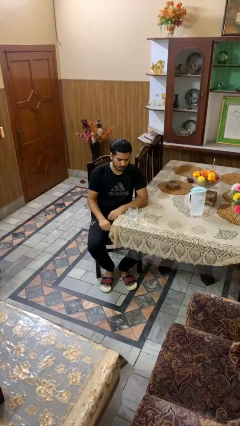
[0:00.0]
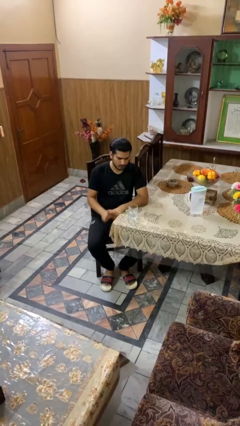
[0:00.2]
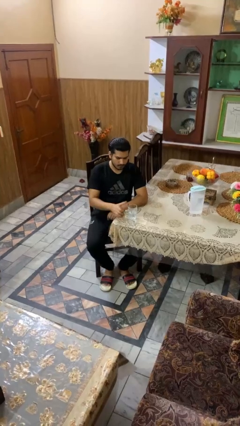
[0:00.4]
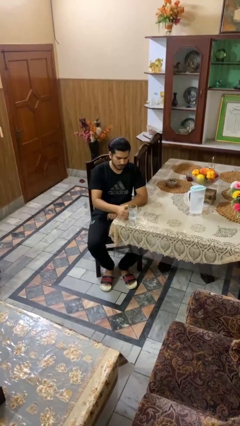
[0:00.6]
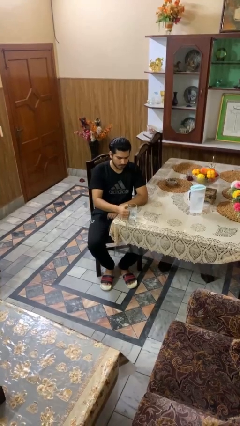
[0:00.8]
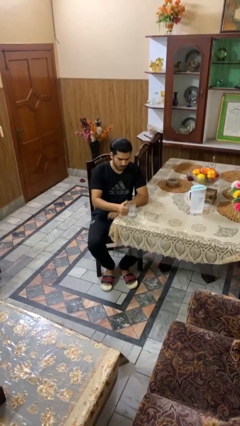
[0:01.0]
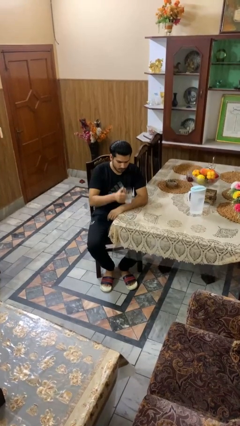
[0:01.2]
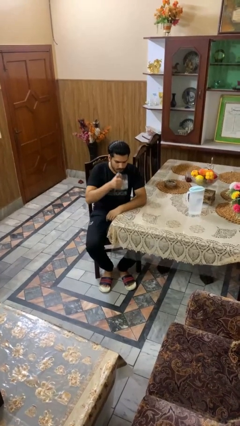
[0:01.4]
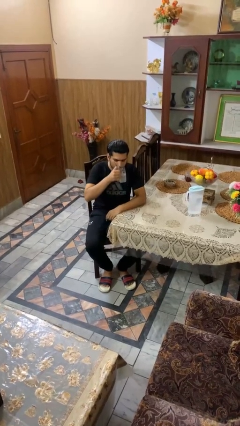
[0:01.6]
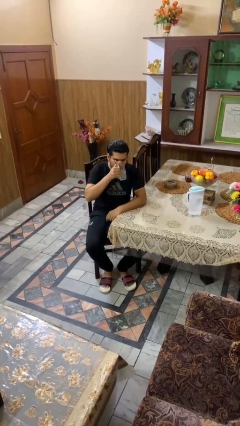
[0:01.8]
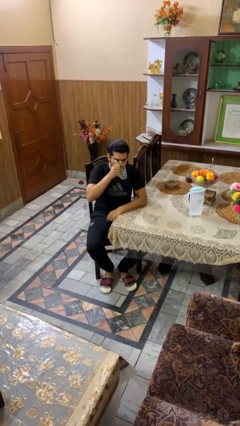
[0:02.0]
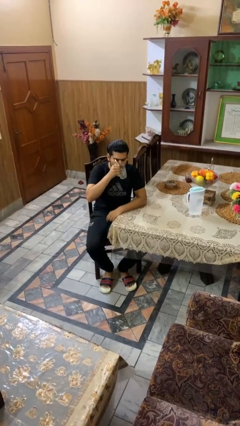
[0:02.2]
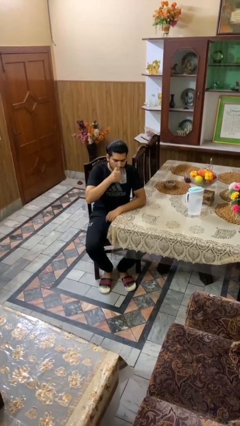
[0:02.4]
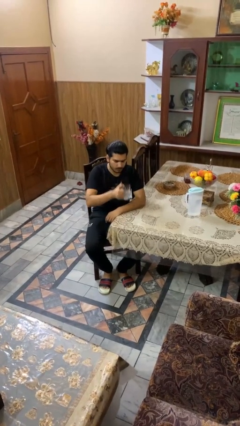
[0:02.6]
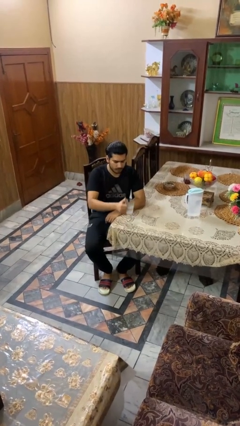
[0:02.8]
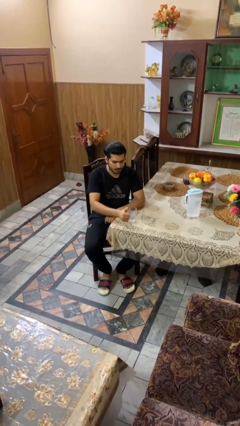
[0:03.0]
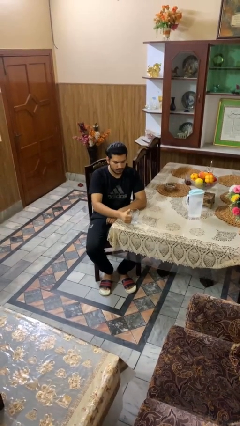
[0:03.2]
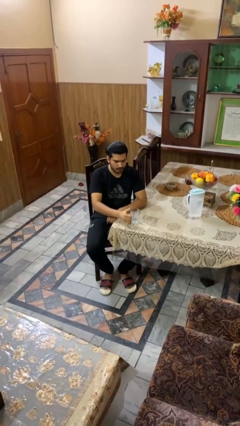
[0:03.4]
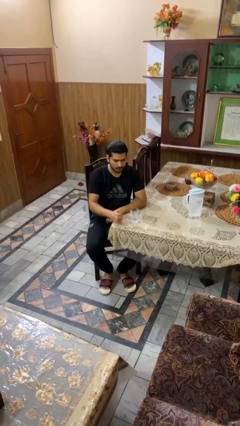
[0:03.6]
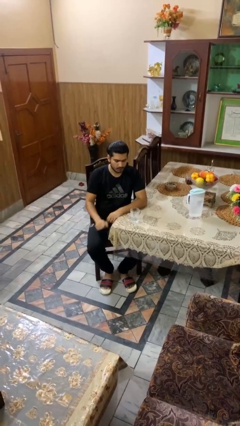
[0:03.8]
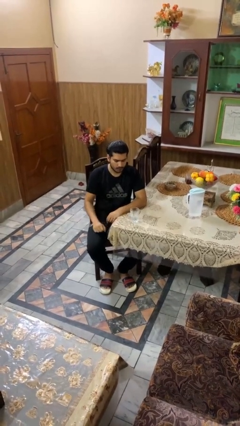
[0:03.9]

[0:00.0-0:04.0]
person drinks from mug

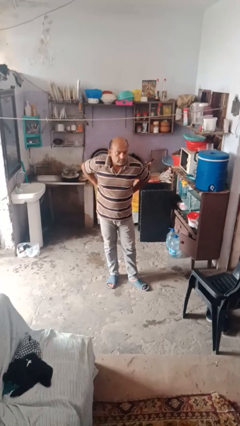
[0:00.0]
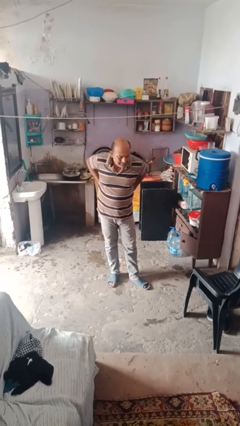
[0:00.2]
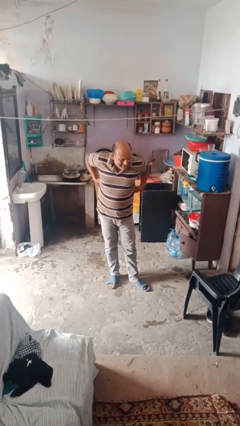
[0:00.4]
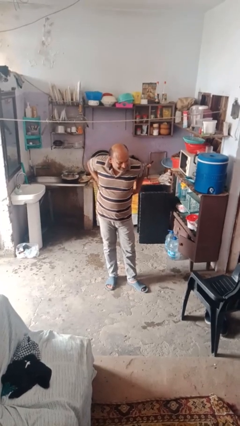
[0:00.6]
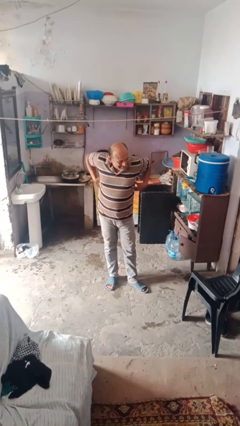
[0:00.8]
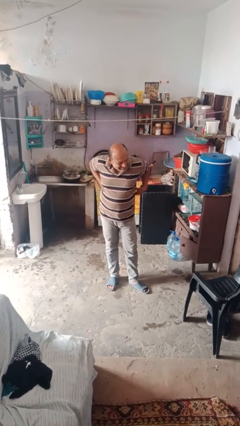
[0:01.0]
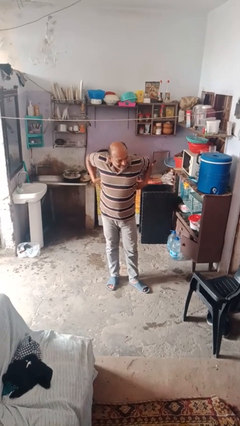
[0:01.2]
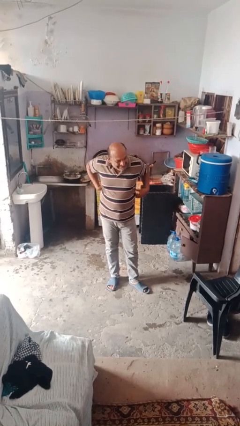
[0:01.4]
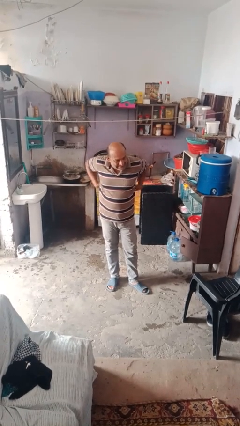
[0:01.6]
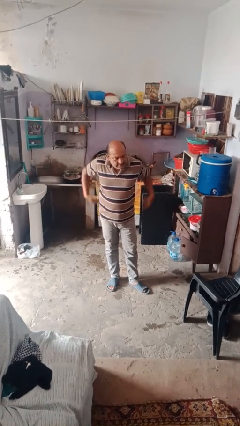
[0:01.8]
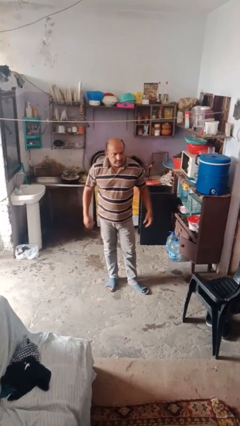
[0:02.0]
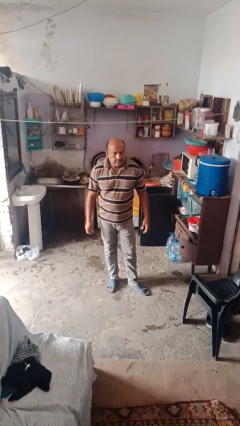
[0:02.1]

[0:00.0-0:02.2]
person stretches arms to side

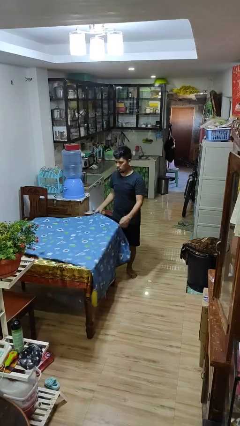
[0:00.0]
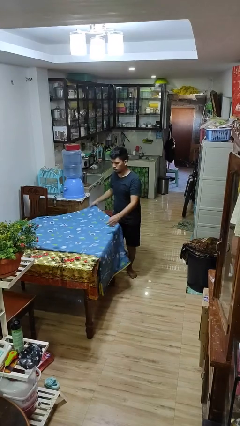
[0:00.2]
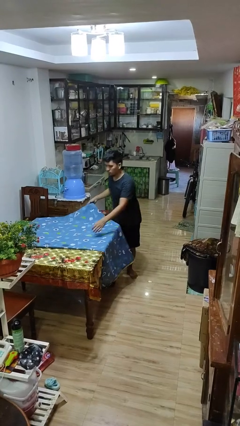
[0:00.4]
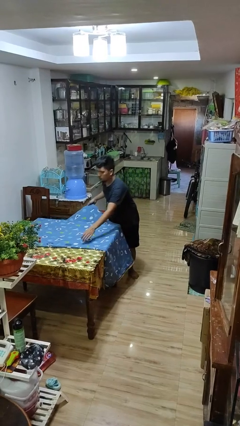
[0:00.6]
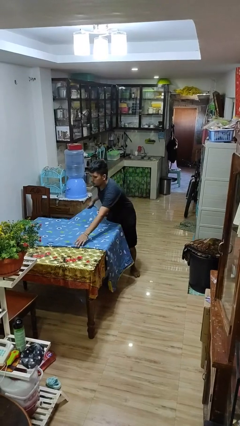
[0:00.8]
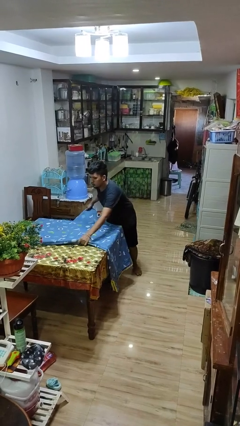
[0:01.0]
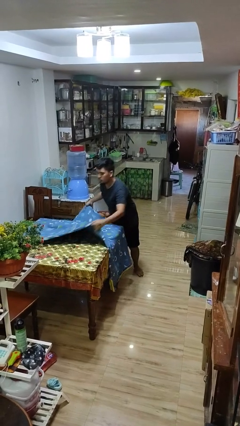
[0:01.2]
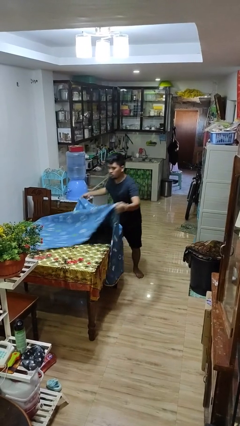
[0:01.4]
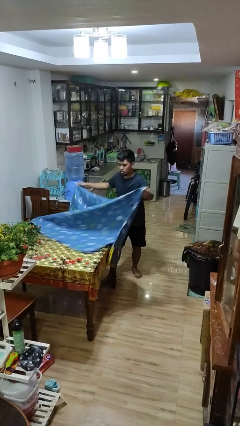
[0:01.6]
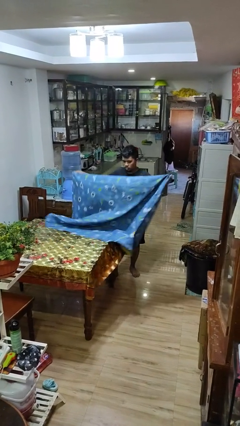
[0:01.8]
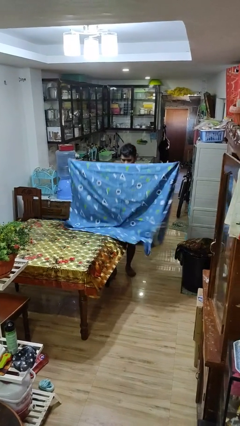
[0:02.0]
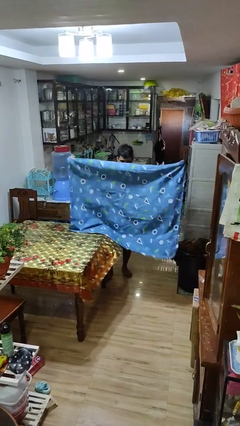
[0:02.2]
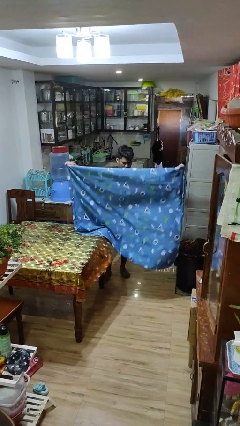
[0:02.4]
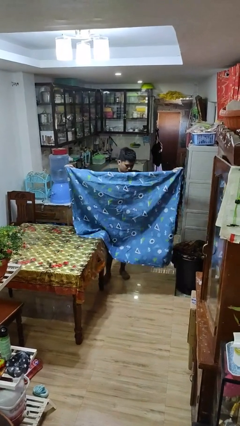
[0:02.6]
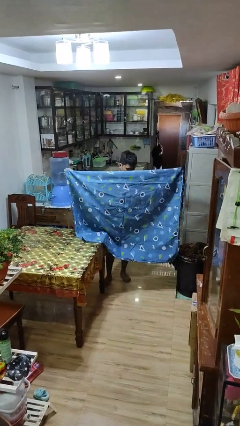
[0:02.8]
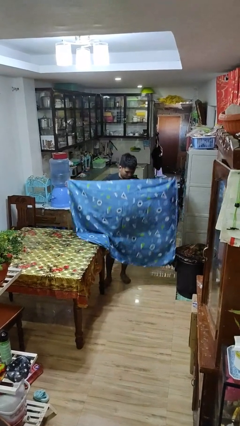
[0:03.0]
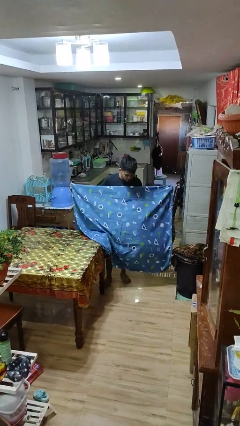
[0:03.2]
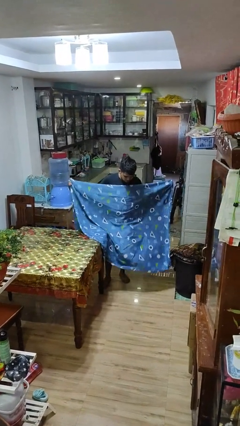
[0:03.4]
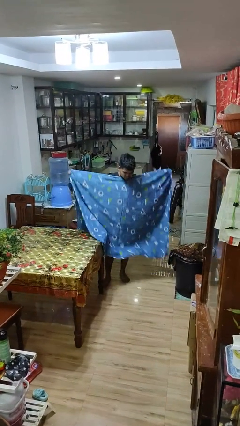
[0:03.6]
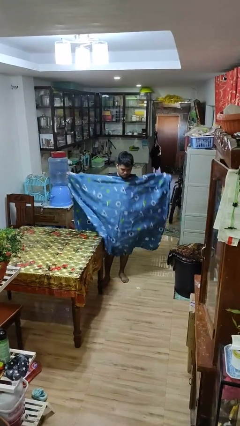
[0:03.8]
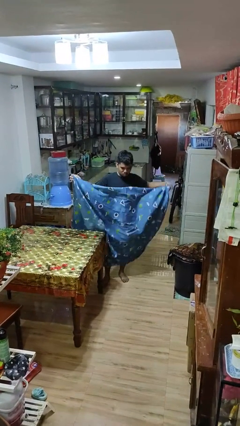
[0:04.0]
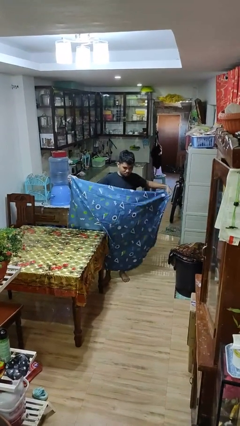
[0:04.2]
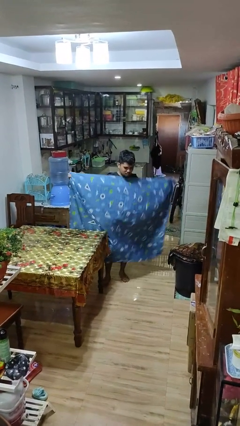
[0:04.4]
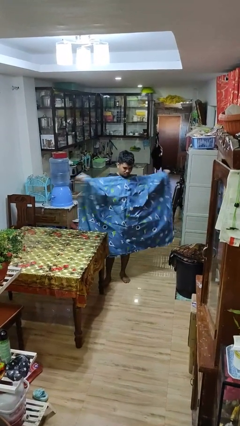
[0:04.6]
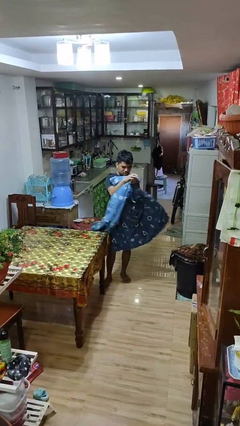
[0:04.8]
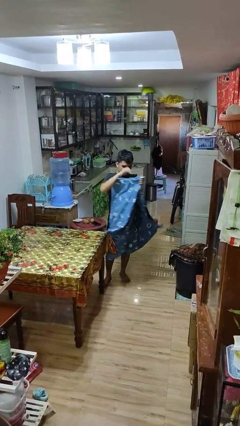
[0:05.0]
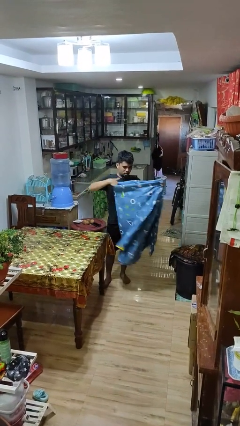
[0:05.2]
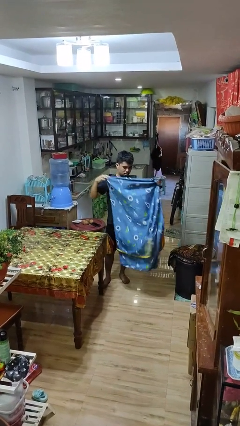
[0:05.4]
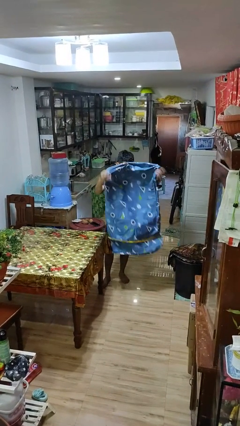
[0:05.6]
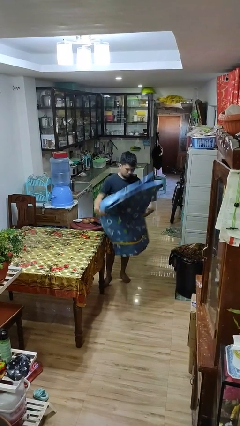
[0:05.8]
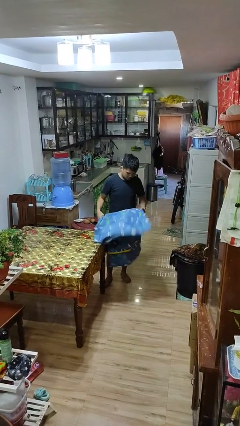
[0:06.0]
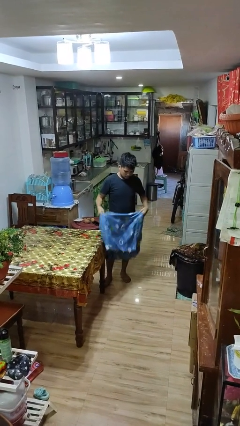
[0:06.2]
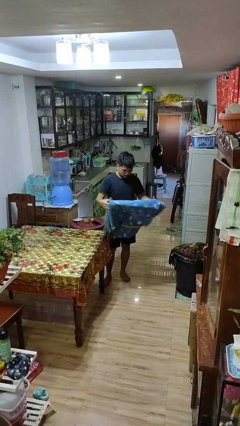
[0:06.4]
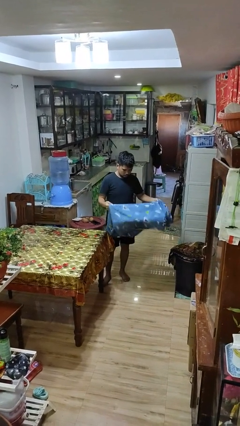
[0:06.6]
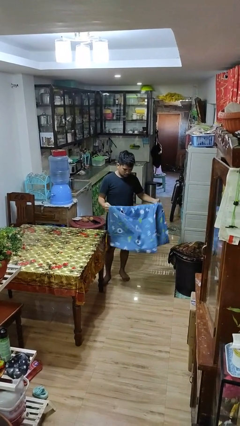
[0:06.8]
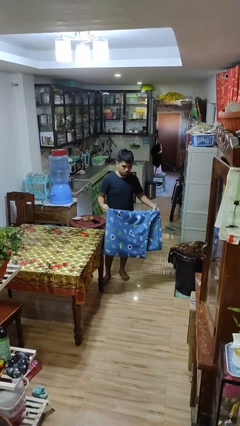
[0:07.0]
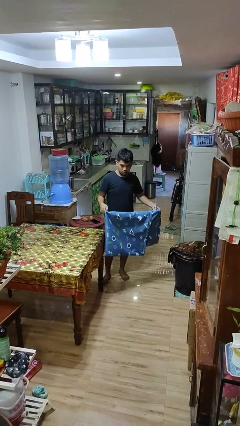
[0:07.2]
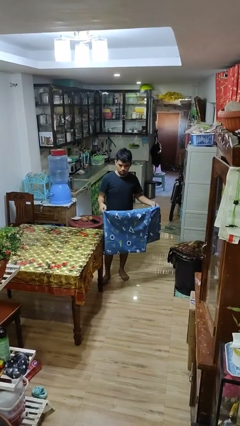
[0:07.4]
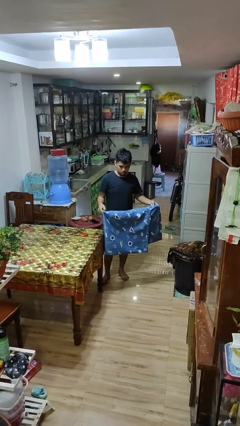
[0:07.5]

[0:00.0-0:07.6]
person folds tablecloth

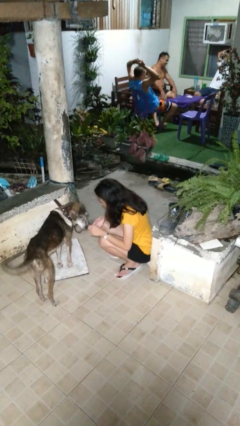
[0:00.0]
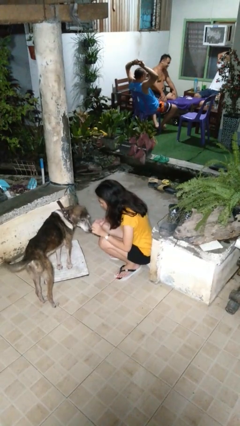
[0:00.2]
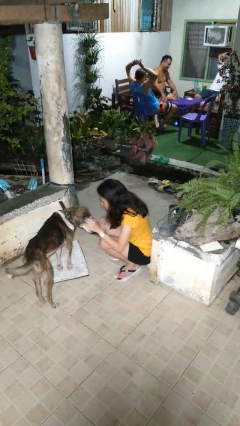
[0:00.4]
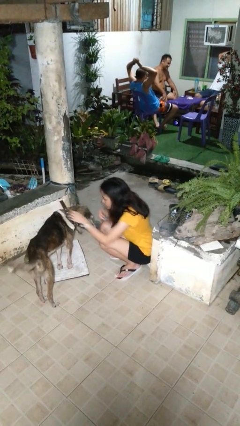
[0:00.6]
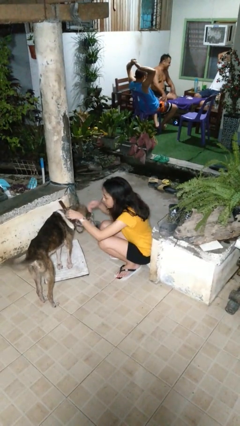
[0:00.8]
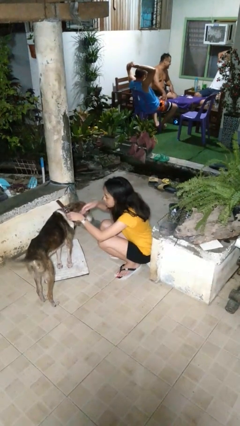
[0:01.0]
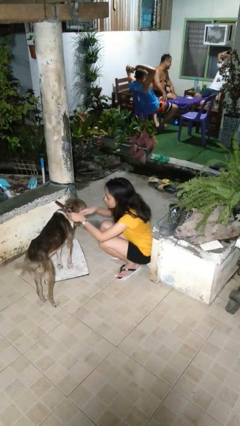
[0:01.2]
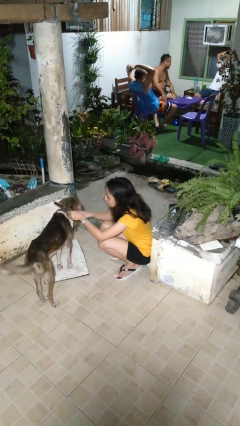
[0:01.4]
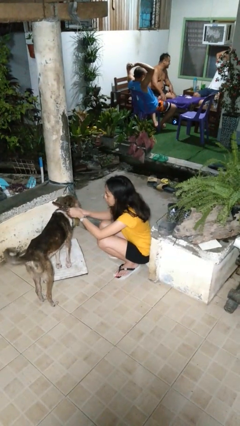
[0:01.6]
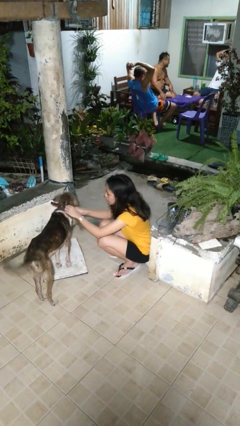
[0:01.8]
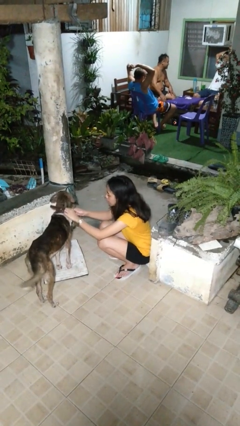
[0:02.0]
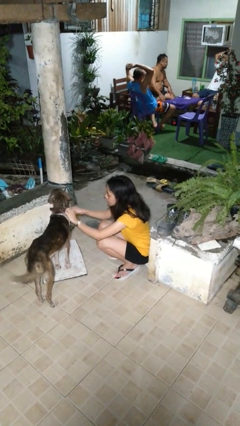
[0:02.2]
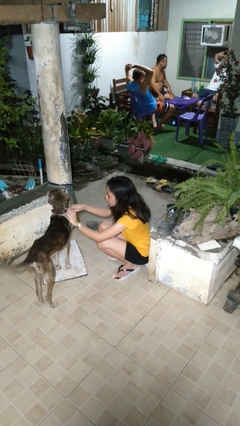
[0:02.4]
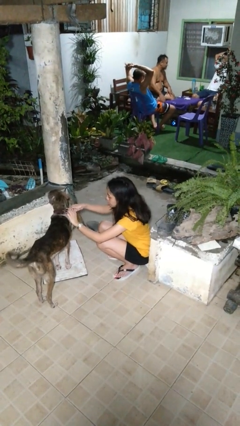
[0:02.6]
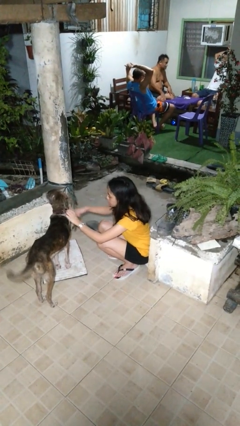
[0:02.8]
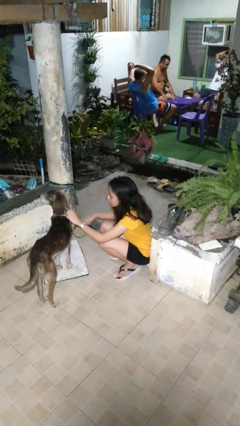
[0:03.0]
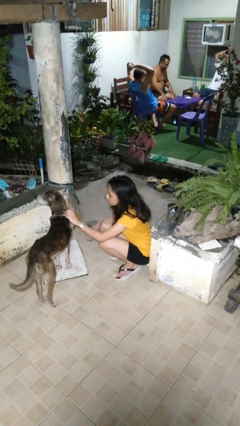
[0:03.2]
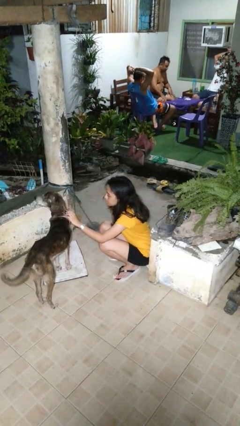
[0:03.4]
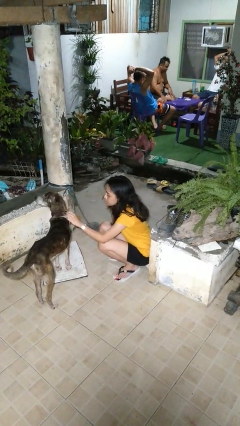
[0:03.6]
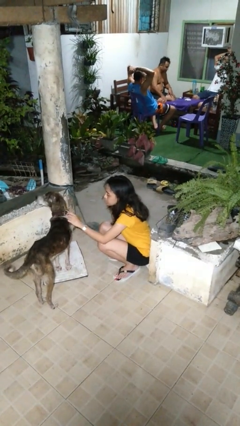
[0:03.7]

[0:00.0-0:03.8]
person unattaches leash from dog
